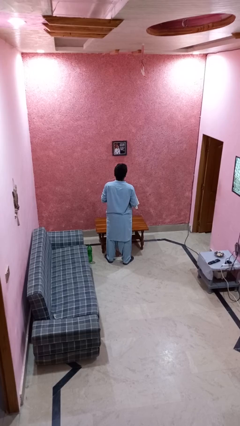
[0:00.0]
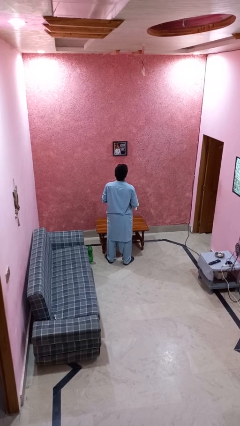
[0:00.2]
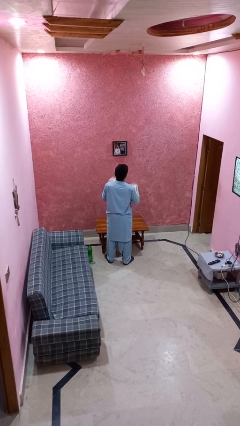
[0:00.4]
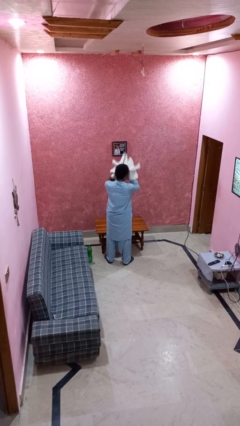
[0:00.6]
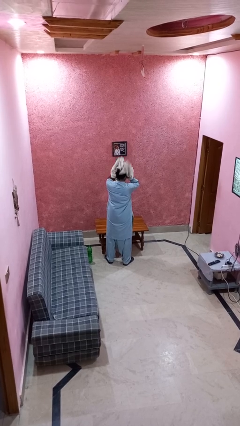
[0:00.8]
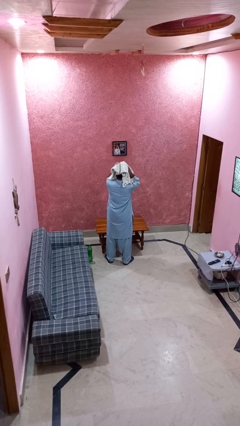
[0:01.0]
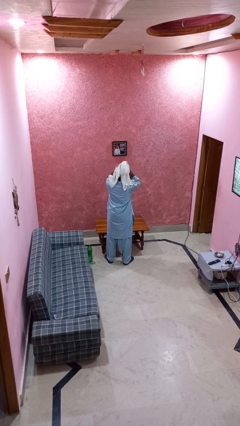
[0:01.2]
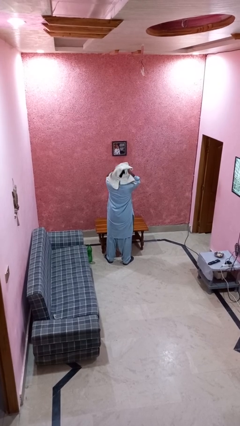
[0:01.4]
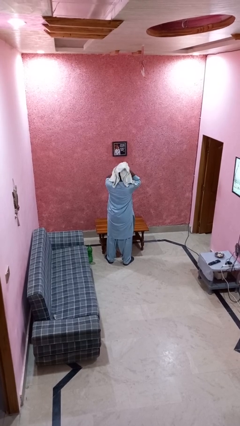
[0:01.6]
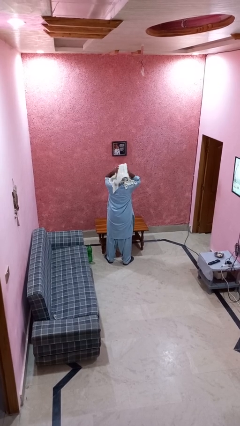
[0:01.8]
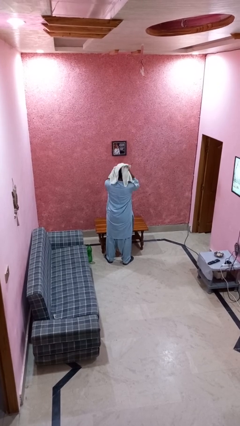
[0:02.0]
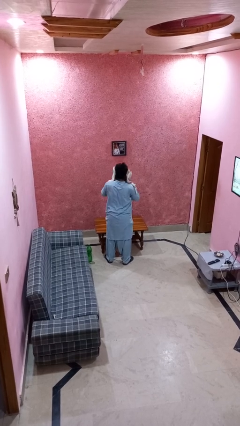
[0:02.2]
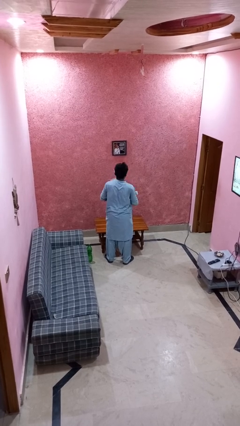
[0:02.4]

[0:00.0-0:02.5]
person dries hair with towel

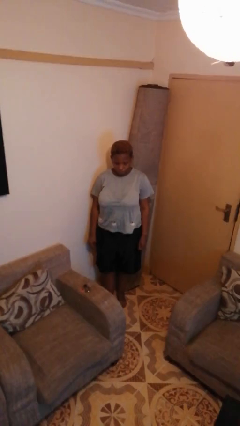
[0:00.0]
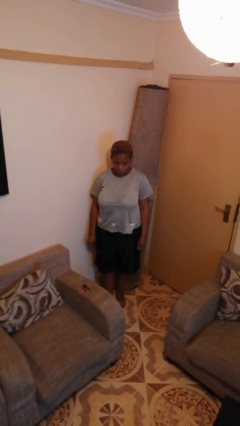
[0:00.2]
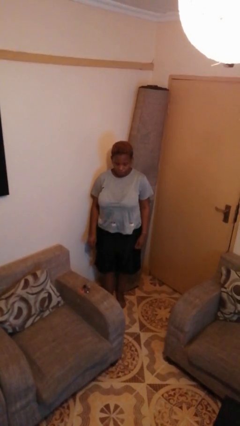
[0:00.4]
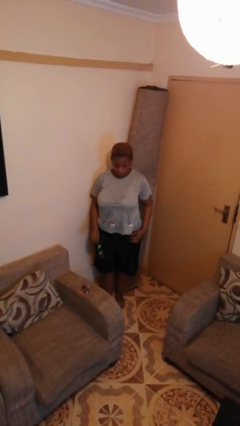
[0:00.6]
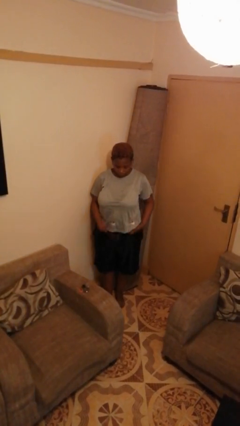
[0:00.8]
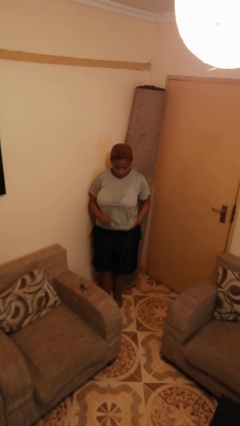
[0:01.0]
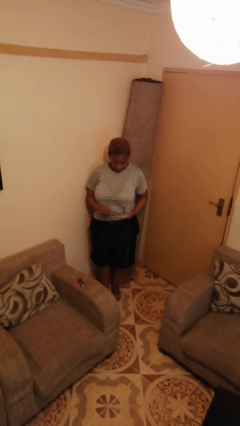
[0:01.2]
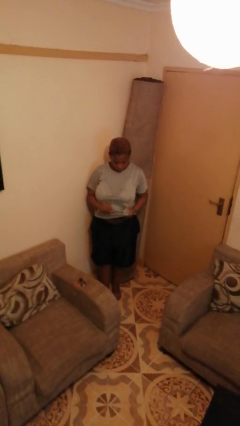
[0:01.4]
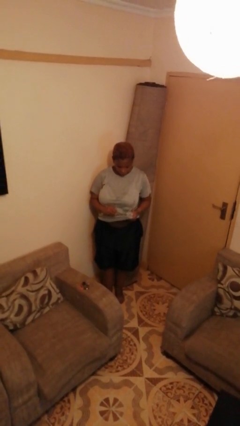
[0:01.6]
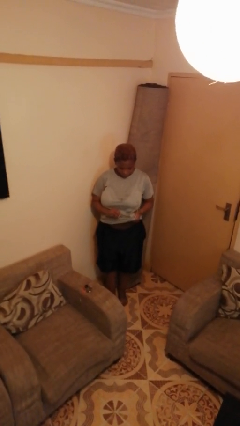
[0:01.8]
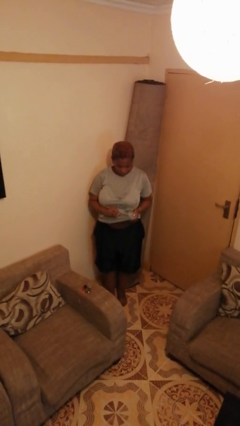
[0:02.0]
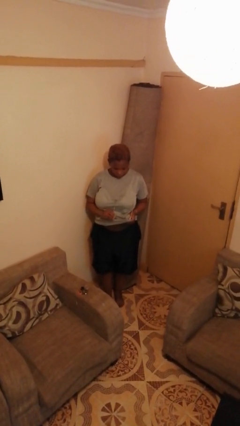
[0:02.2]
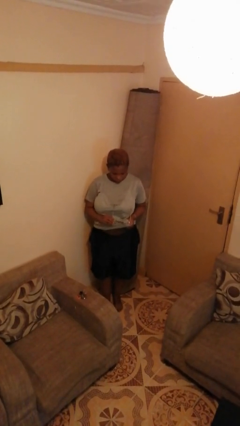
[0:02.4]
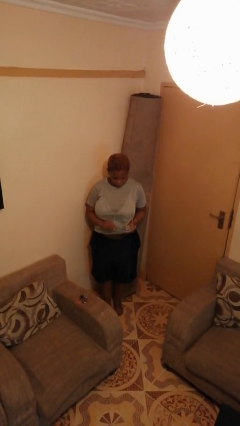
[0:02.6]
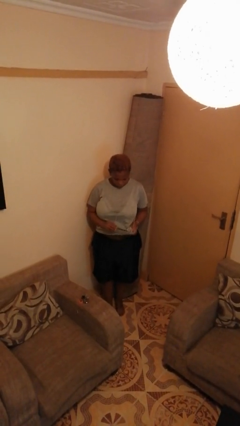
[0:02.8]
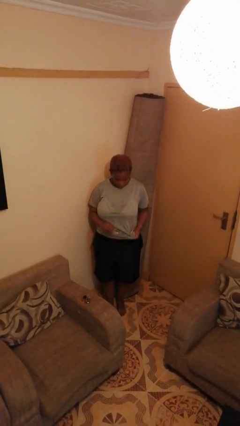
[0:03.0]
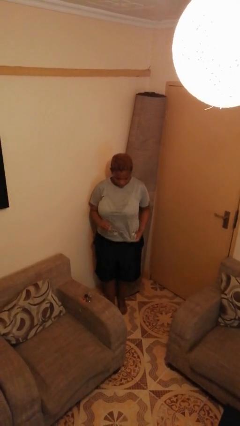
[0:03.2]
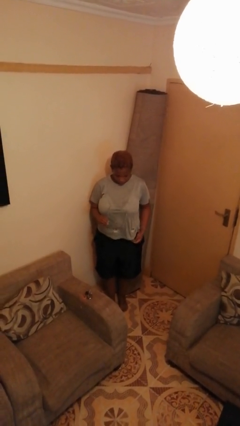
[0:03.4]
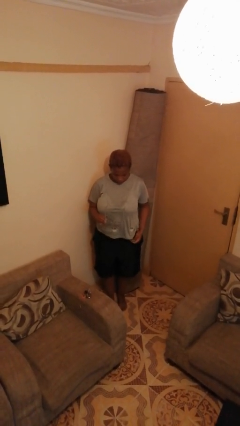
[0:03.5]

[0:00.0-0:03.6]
person cleans eyeglasses

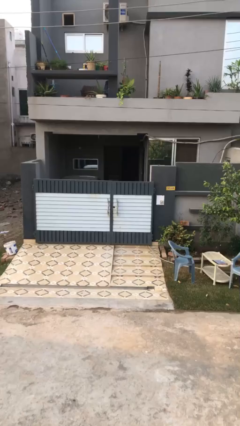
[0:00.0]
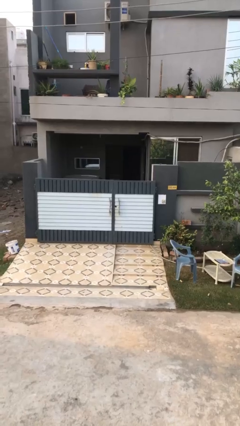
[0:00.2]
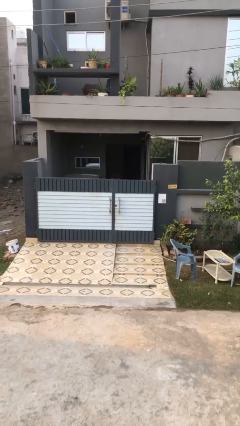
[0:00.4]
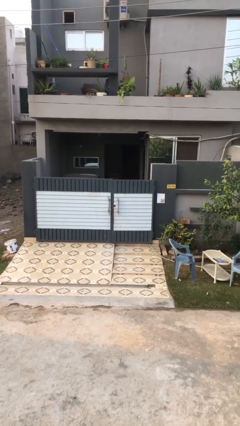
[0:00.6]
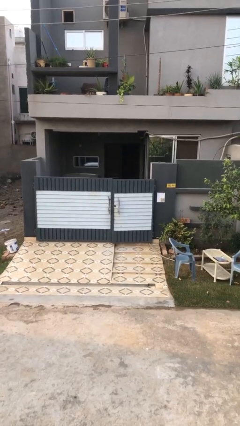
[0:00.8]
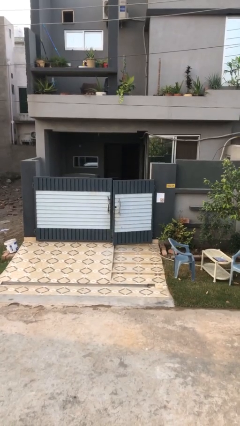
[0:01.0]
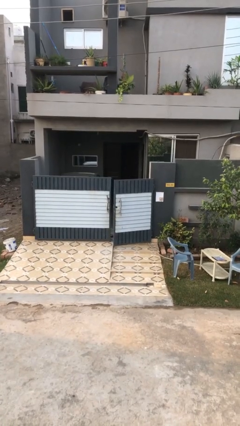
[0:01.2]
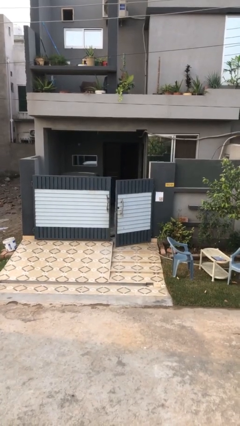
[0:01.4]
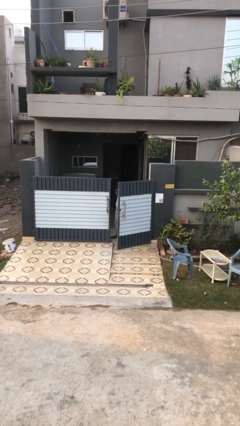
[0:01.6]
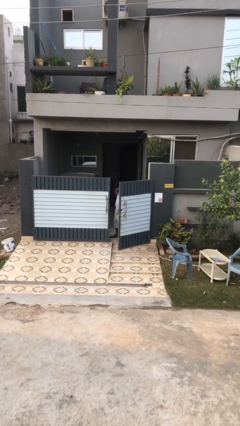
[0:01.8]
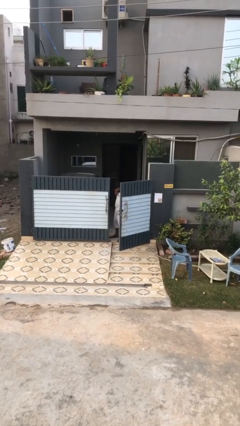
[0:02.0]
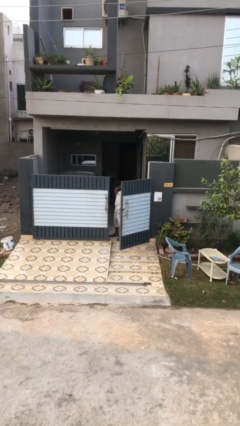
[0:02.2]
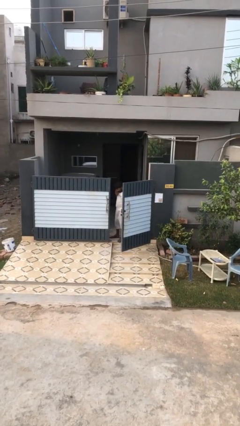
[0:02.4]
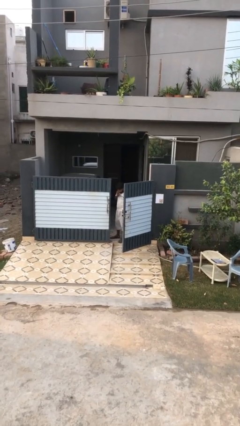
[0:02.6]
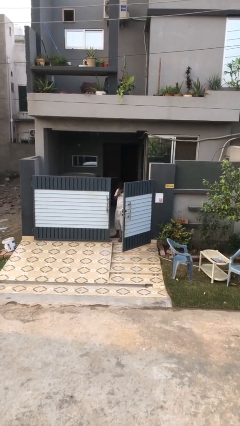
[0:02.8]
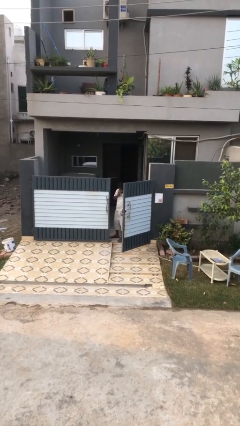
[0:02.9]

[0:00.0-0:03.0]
person opens facility door

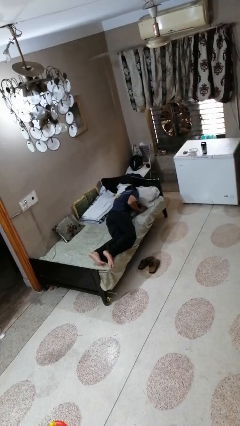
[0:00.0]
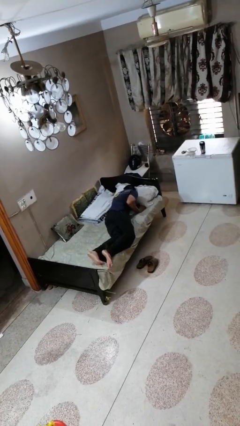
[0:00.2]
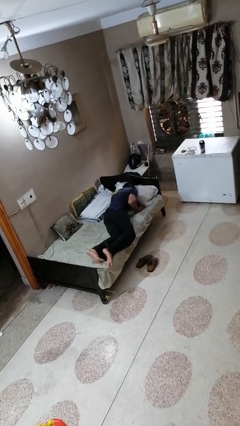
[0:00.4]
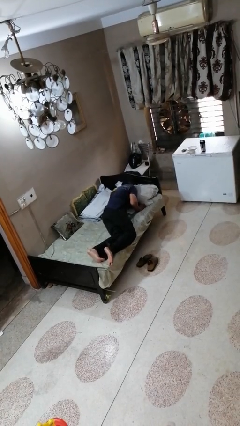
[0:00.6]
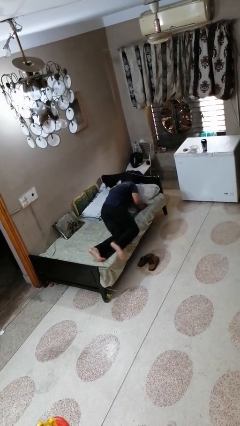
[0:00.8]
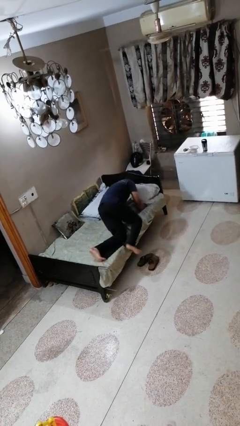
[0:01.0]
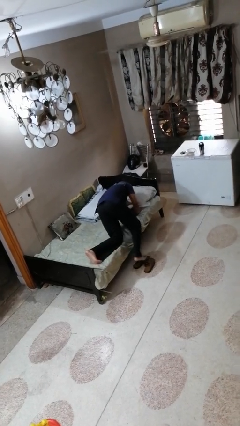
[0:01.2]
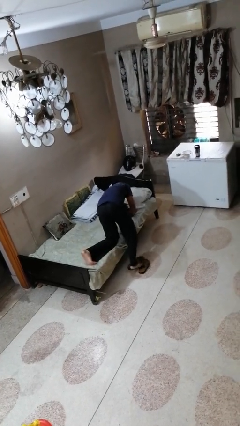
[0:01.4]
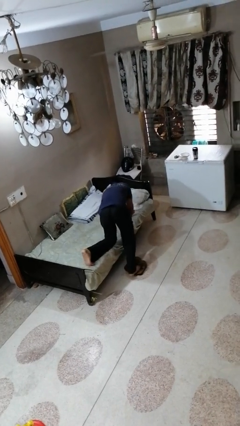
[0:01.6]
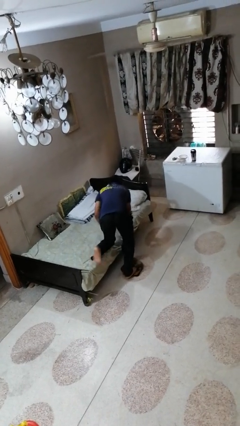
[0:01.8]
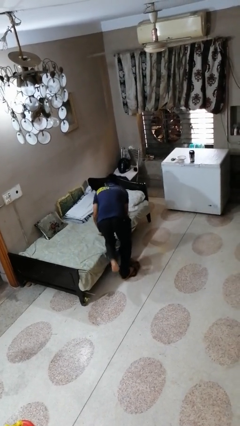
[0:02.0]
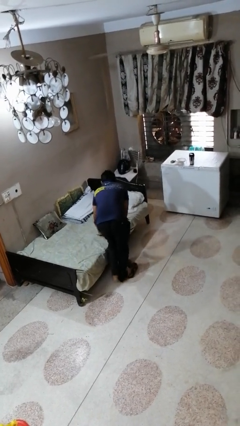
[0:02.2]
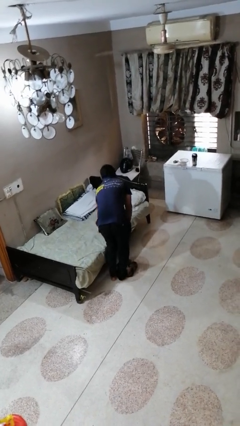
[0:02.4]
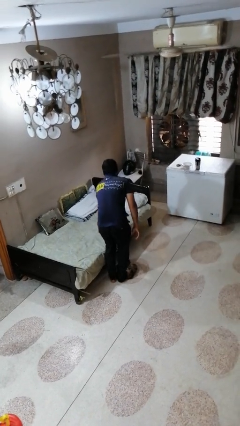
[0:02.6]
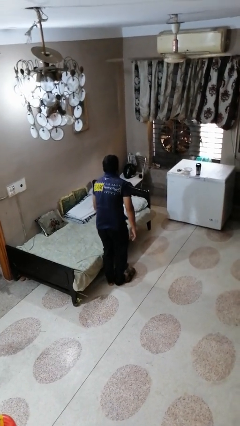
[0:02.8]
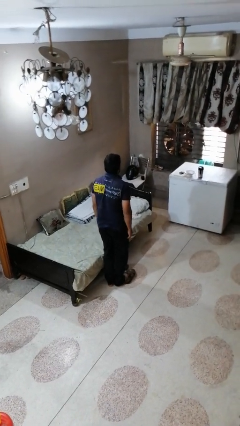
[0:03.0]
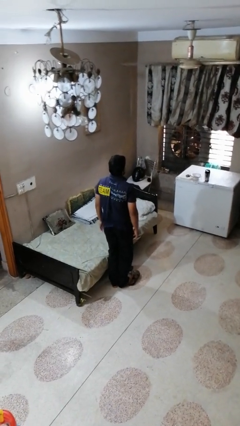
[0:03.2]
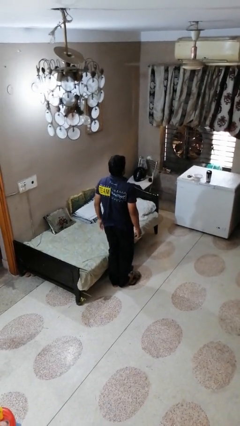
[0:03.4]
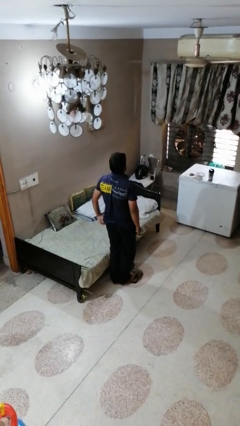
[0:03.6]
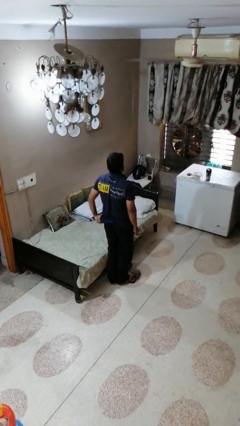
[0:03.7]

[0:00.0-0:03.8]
person stands up

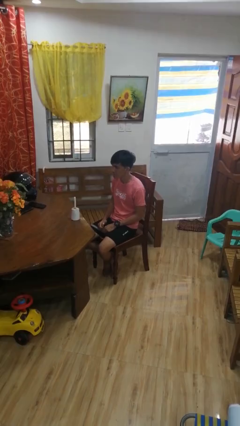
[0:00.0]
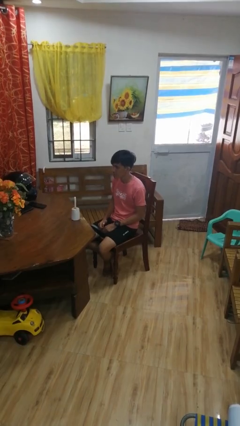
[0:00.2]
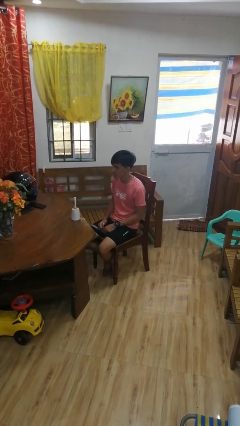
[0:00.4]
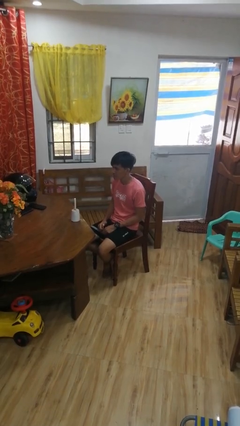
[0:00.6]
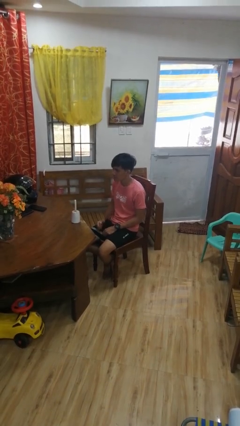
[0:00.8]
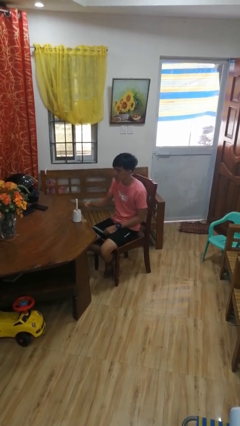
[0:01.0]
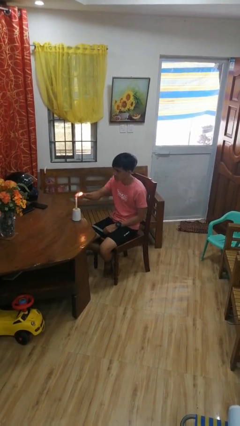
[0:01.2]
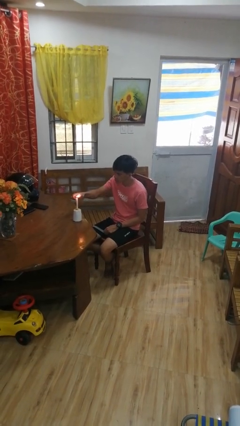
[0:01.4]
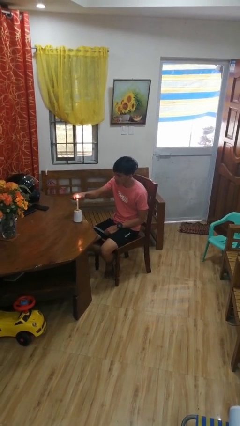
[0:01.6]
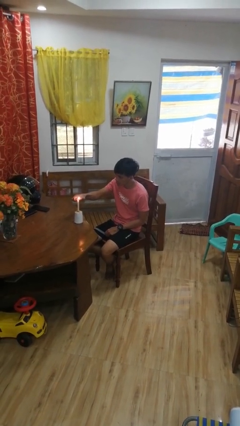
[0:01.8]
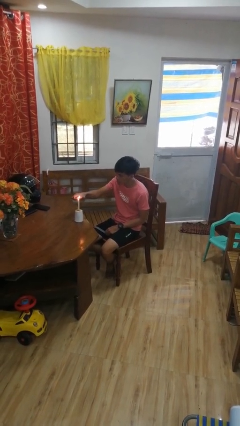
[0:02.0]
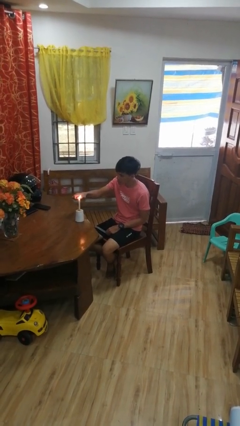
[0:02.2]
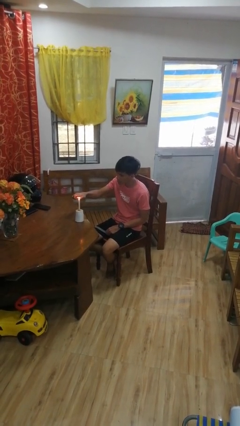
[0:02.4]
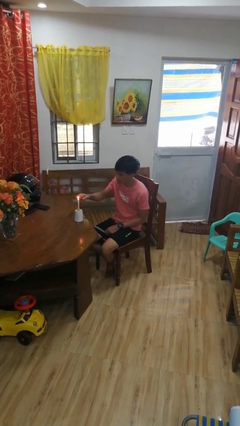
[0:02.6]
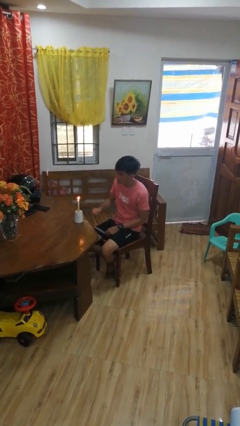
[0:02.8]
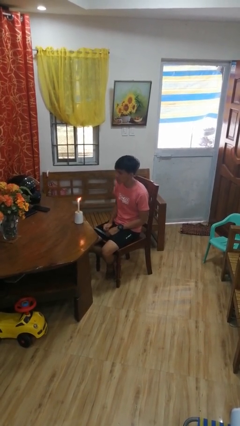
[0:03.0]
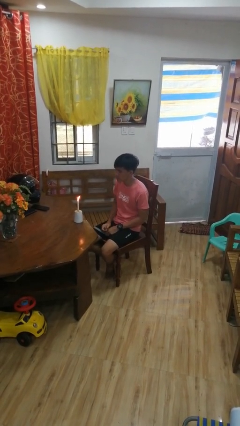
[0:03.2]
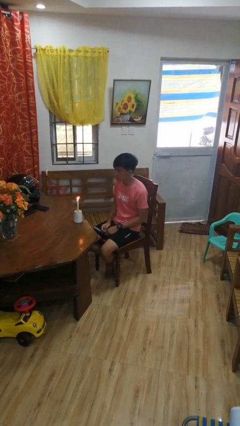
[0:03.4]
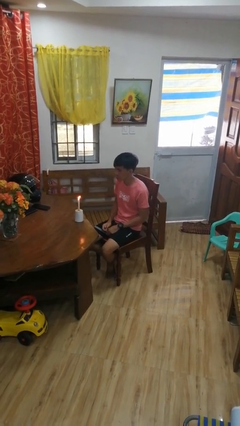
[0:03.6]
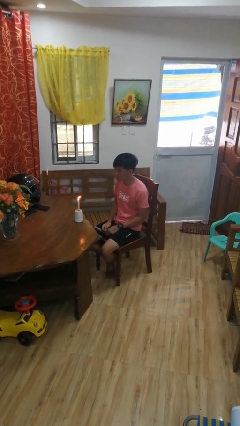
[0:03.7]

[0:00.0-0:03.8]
person lights candle

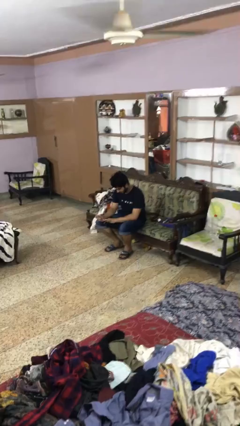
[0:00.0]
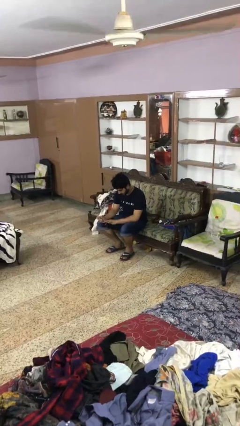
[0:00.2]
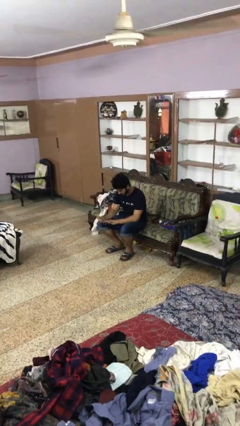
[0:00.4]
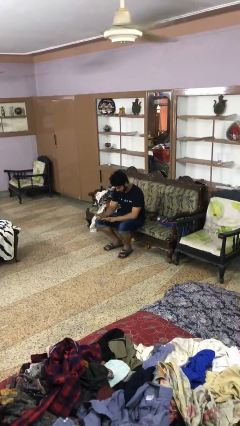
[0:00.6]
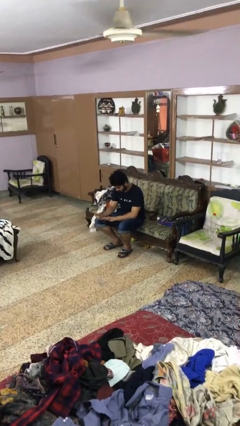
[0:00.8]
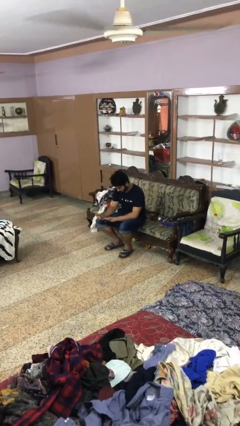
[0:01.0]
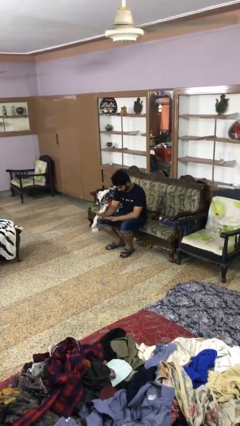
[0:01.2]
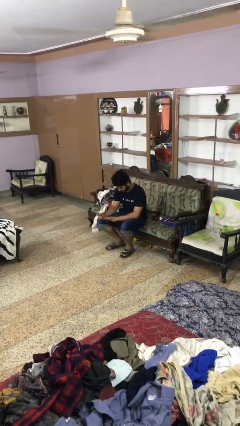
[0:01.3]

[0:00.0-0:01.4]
person clips fingernails
